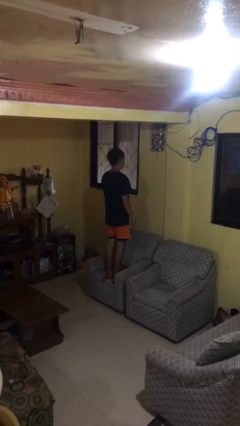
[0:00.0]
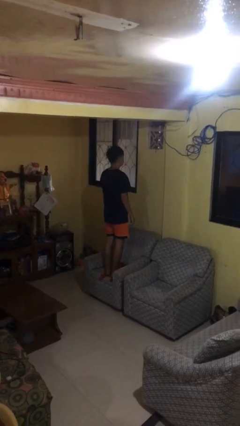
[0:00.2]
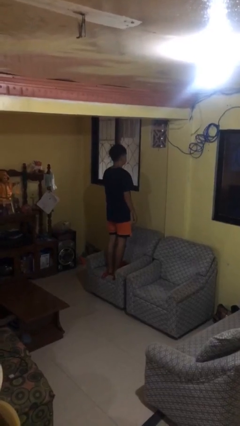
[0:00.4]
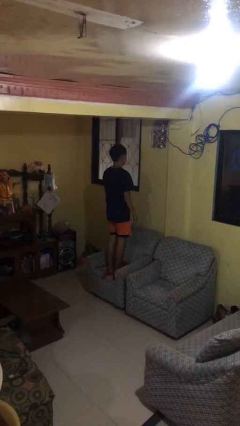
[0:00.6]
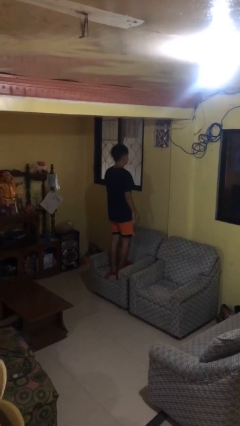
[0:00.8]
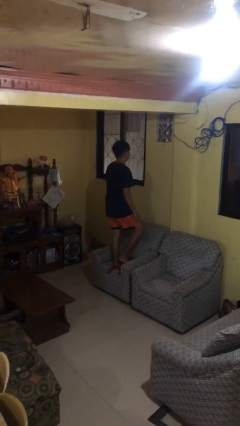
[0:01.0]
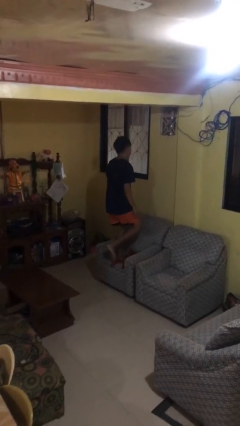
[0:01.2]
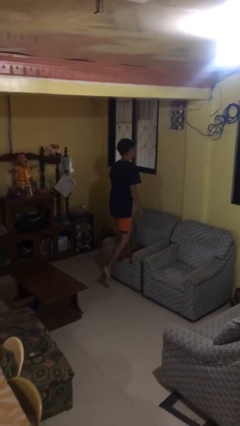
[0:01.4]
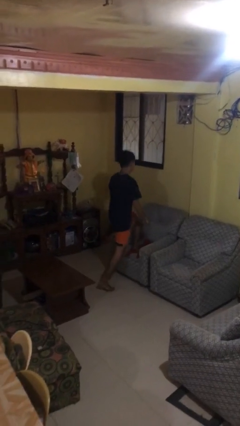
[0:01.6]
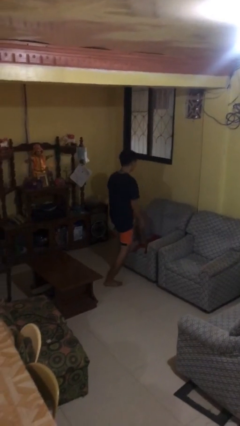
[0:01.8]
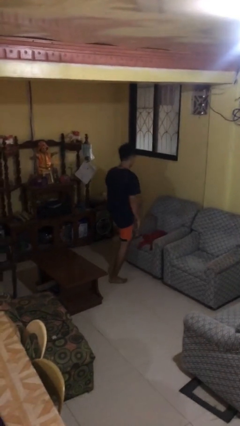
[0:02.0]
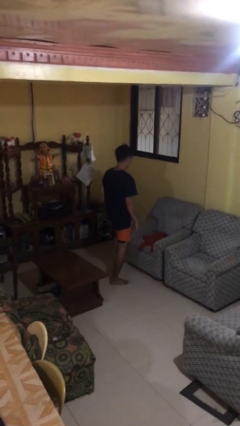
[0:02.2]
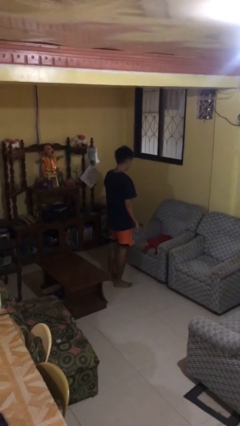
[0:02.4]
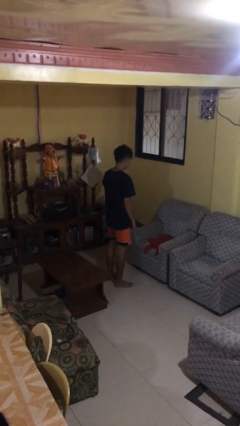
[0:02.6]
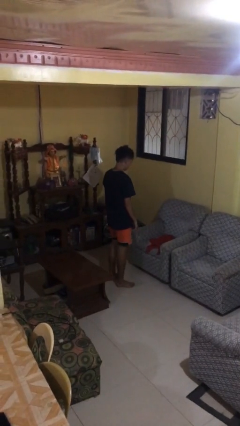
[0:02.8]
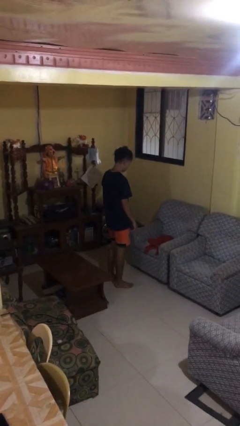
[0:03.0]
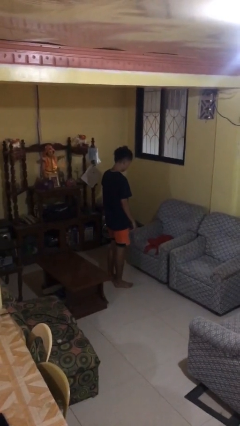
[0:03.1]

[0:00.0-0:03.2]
person climbs off couch

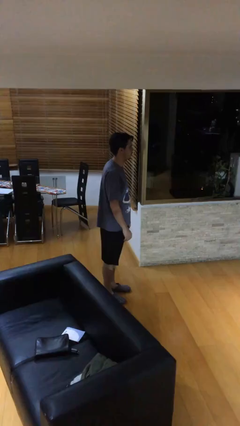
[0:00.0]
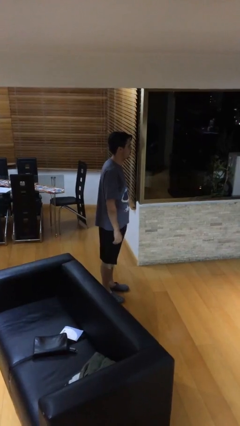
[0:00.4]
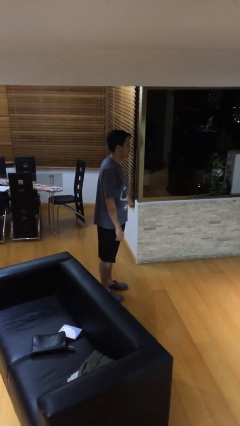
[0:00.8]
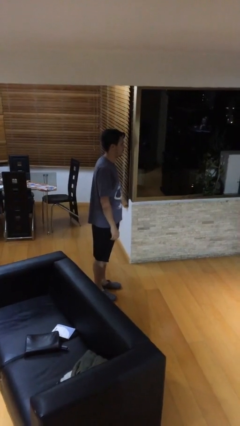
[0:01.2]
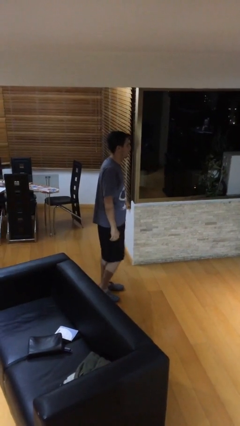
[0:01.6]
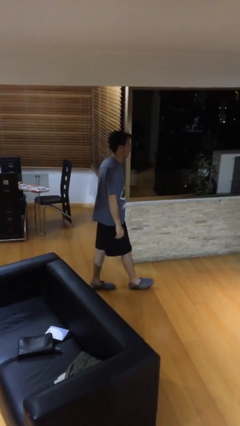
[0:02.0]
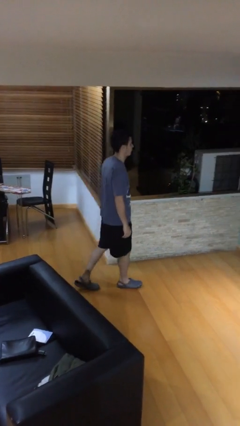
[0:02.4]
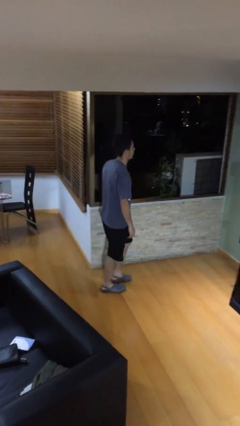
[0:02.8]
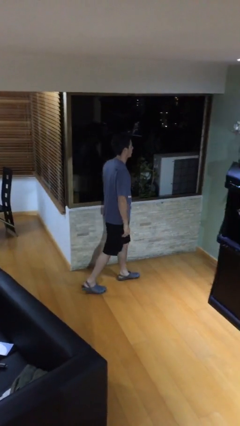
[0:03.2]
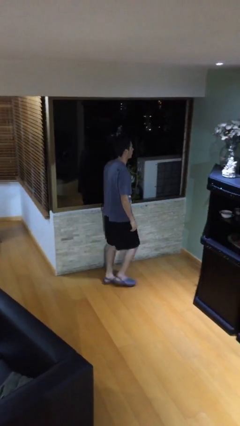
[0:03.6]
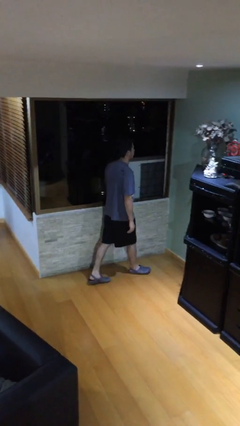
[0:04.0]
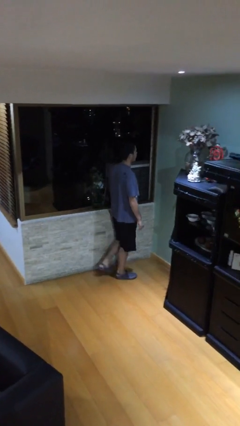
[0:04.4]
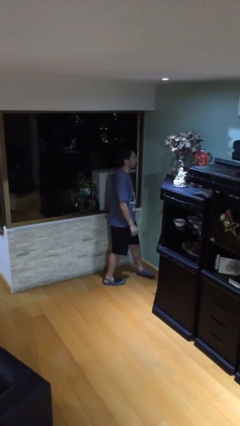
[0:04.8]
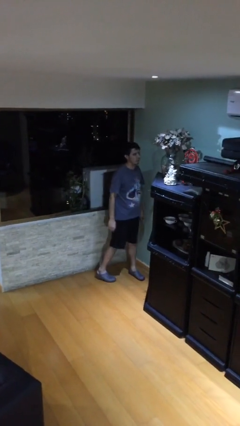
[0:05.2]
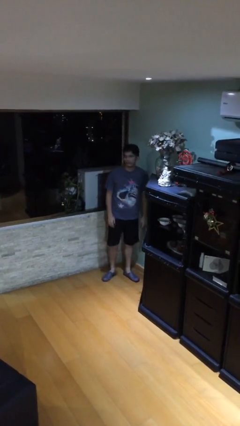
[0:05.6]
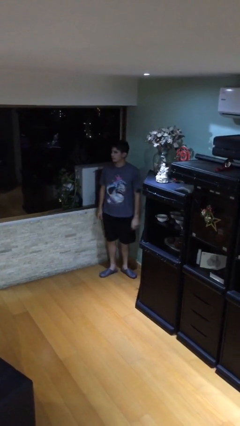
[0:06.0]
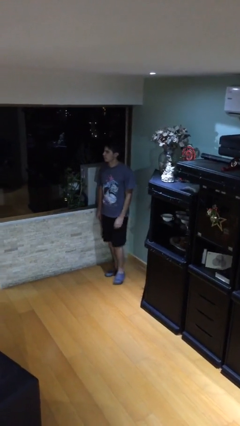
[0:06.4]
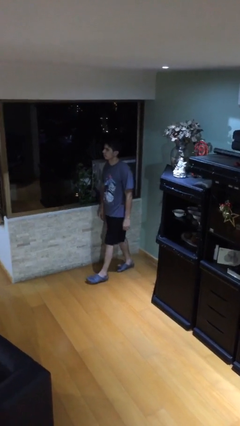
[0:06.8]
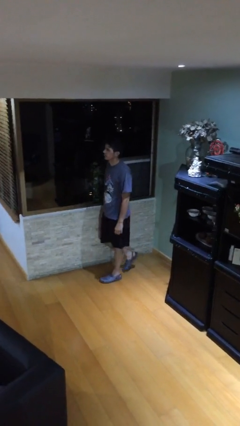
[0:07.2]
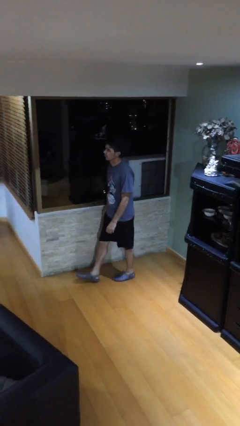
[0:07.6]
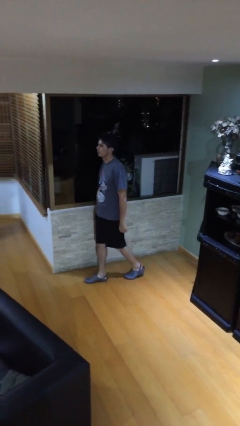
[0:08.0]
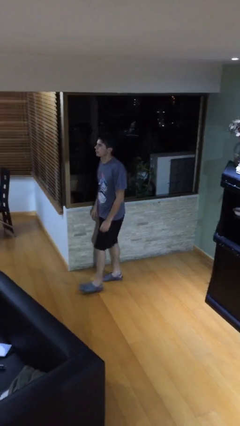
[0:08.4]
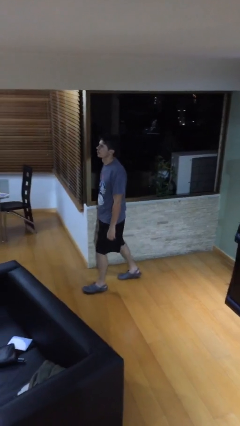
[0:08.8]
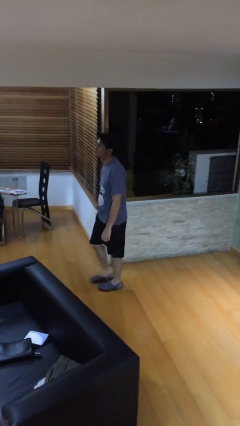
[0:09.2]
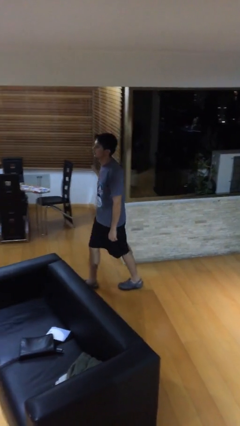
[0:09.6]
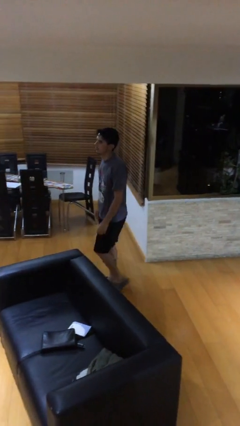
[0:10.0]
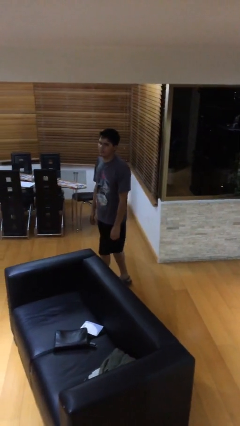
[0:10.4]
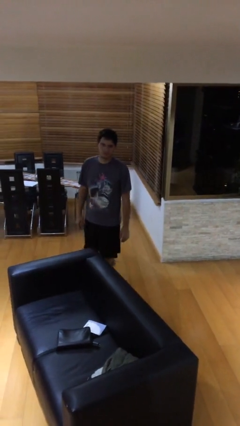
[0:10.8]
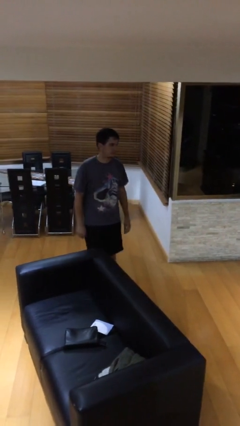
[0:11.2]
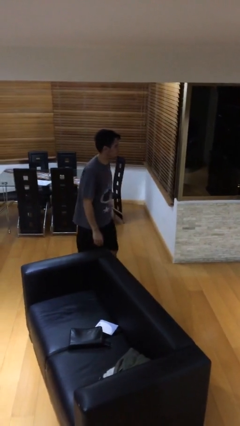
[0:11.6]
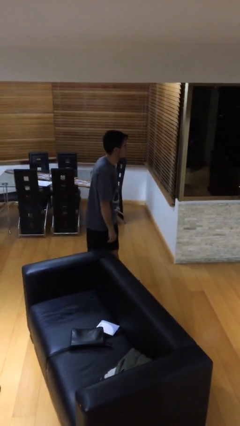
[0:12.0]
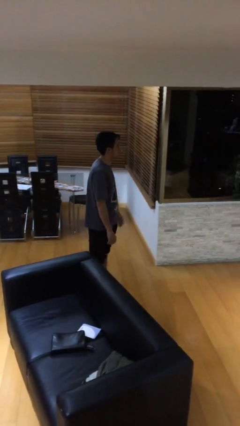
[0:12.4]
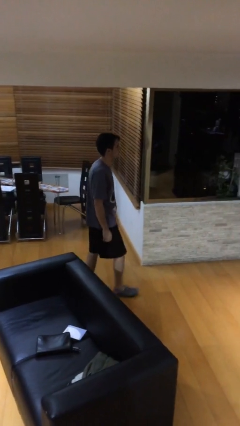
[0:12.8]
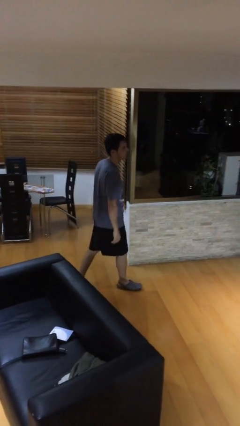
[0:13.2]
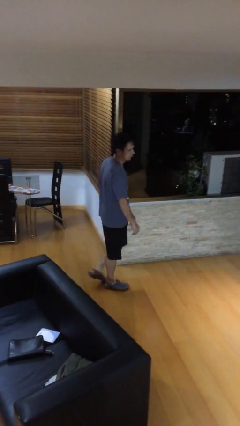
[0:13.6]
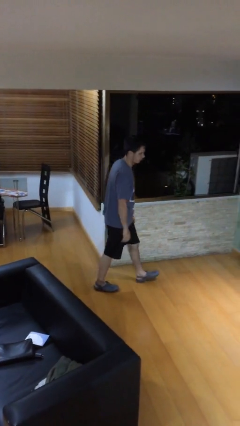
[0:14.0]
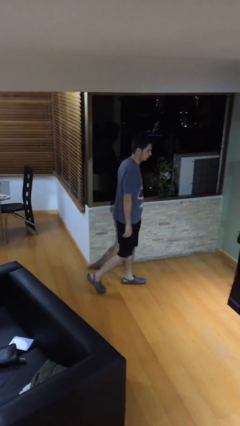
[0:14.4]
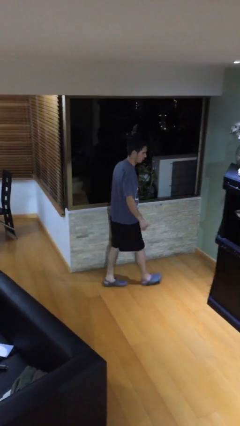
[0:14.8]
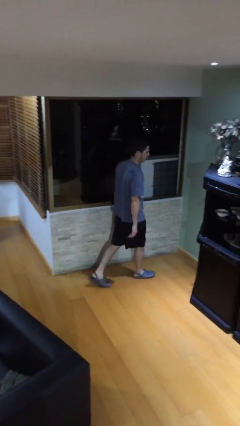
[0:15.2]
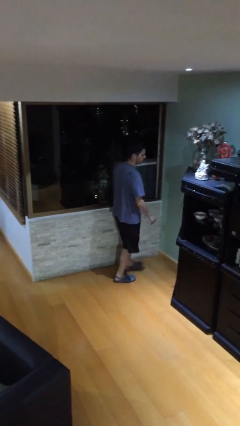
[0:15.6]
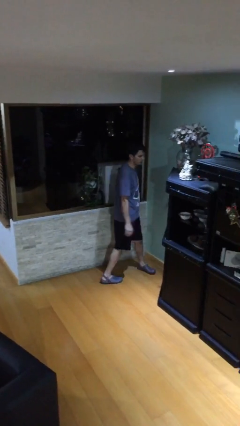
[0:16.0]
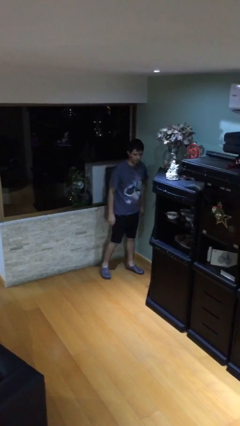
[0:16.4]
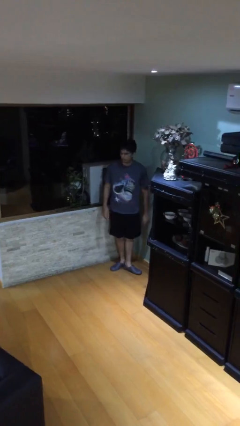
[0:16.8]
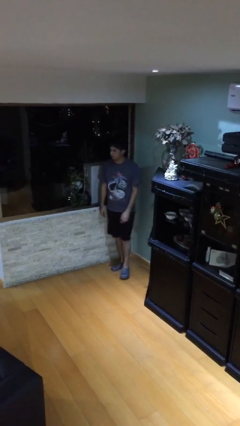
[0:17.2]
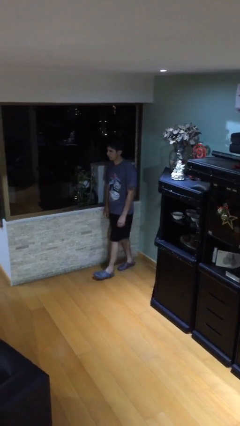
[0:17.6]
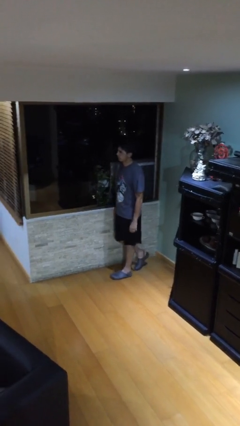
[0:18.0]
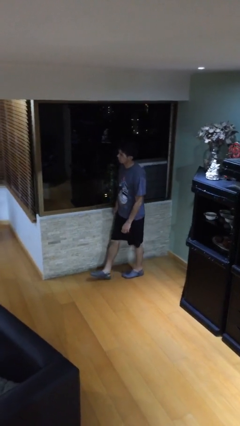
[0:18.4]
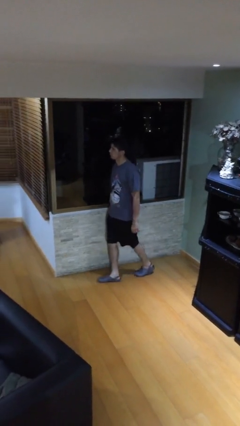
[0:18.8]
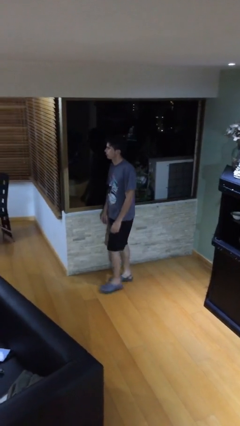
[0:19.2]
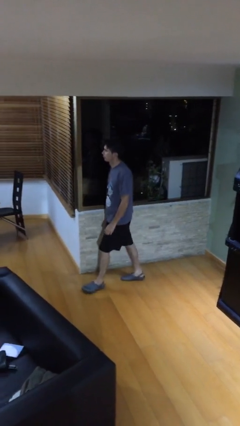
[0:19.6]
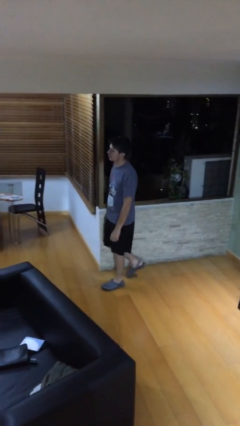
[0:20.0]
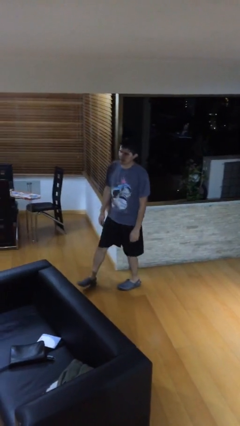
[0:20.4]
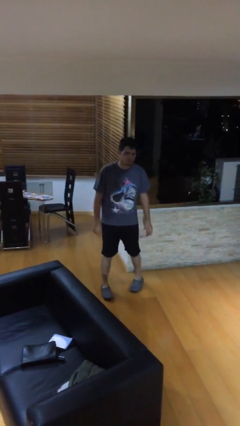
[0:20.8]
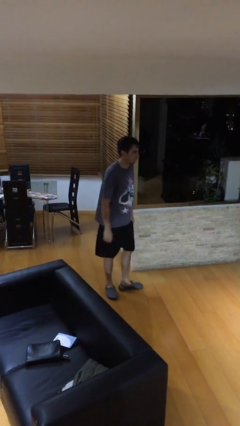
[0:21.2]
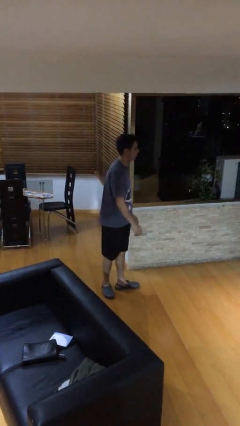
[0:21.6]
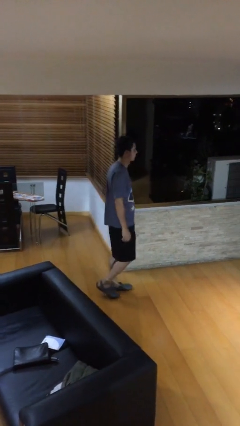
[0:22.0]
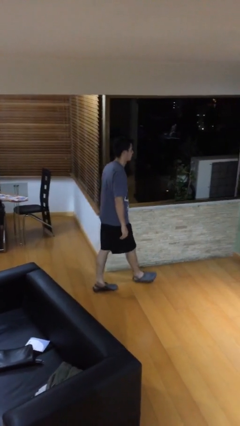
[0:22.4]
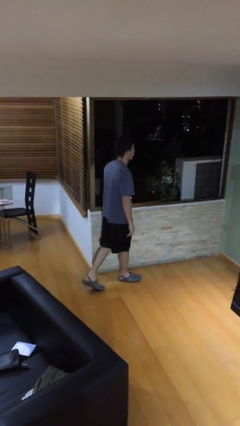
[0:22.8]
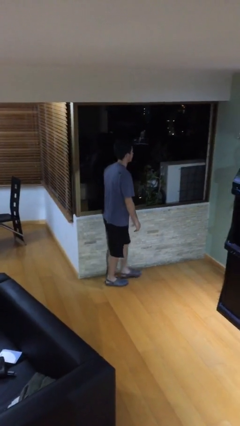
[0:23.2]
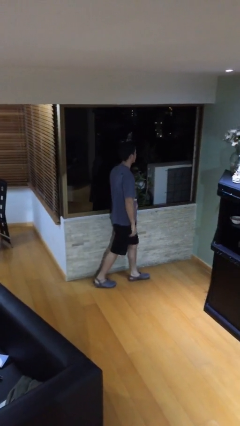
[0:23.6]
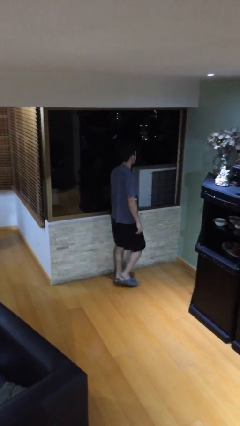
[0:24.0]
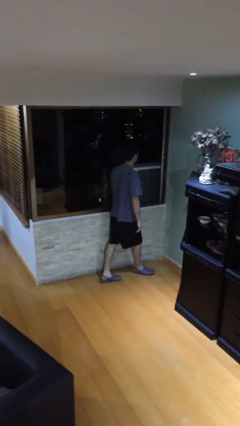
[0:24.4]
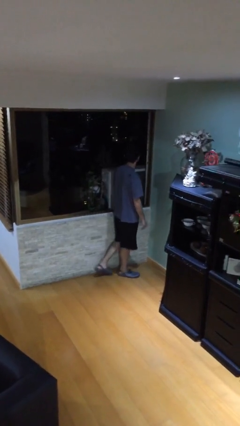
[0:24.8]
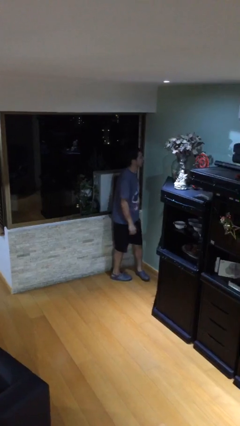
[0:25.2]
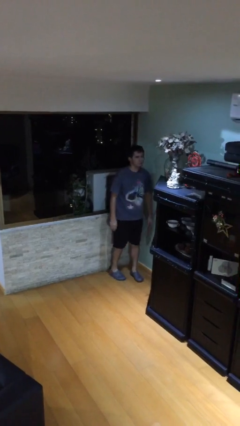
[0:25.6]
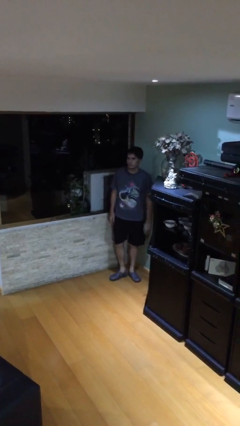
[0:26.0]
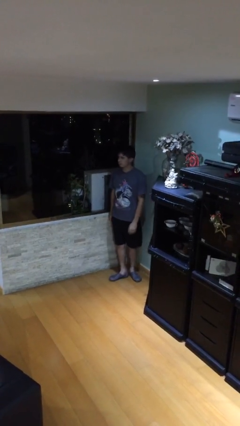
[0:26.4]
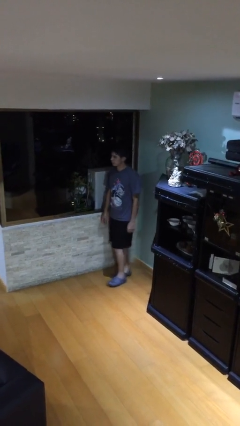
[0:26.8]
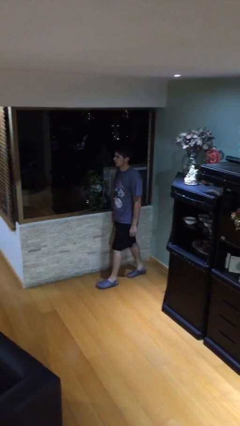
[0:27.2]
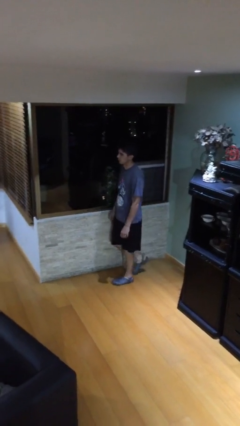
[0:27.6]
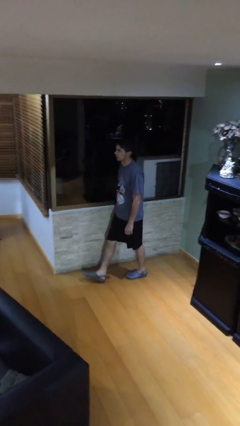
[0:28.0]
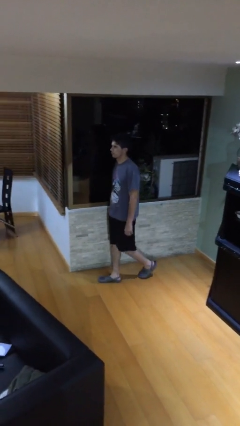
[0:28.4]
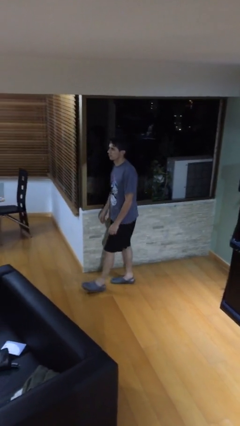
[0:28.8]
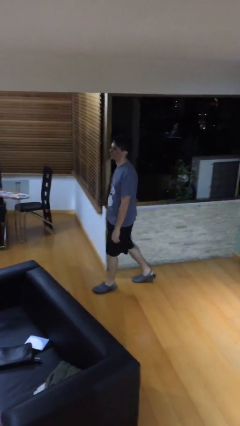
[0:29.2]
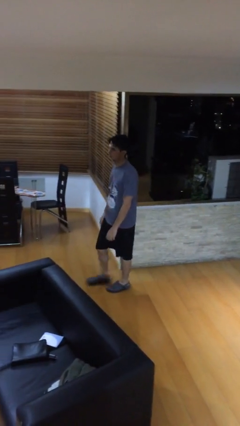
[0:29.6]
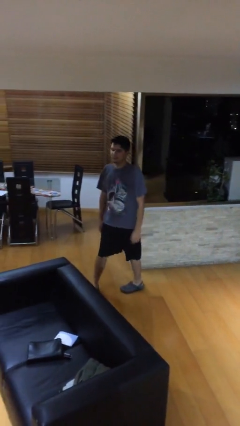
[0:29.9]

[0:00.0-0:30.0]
person walks
